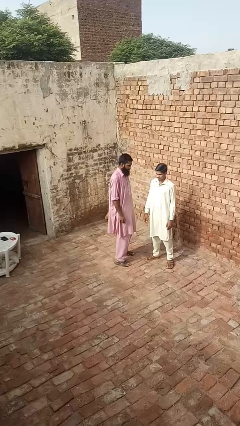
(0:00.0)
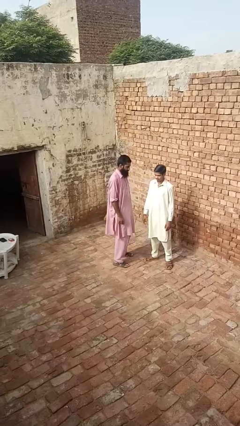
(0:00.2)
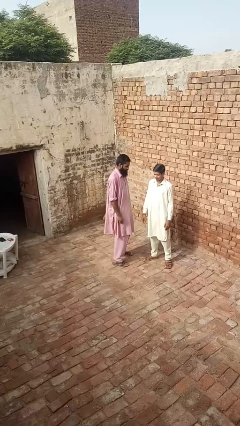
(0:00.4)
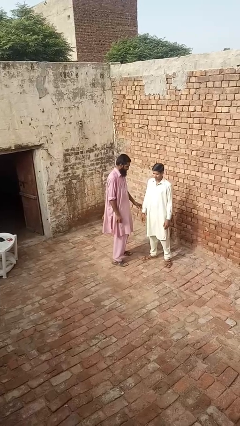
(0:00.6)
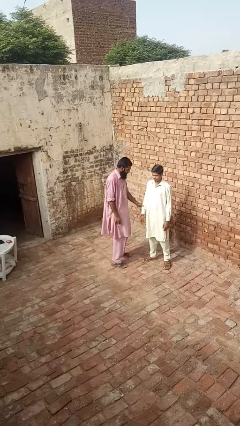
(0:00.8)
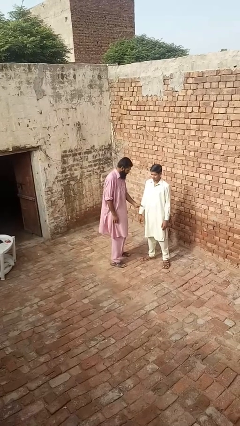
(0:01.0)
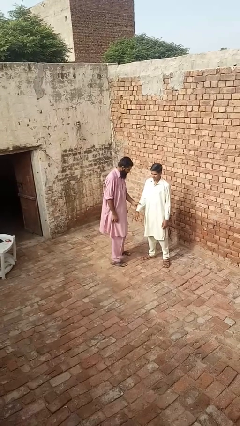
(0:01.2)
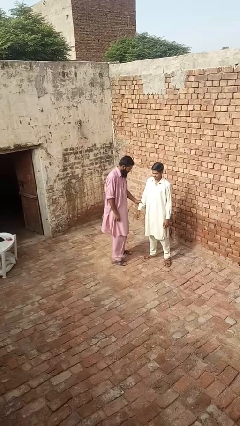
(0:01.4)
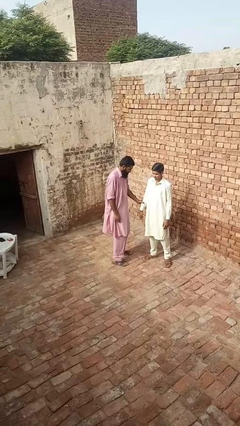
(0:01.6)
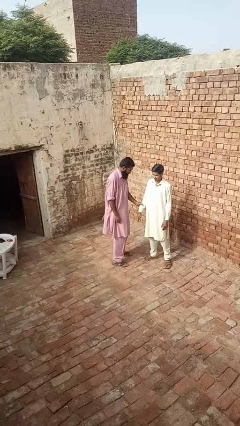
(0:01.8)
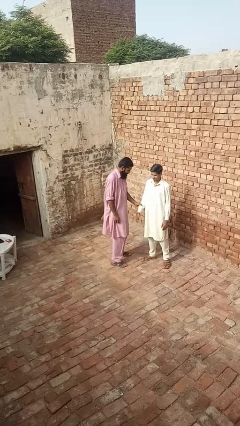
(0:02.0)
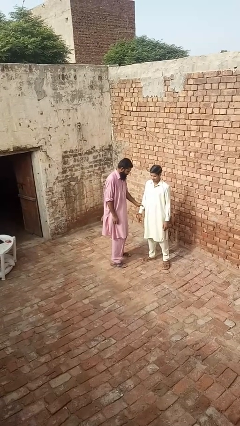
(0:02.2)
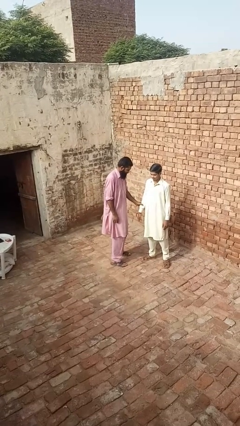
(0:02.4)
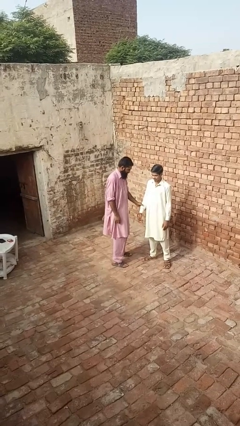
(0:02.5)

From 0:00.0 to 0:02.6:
person grabs person by forearm

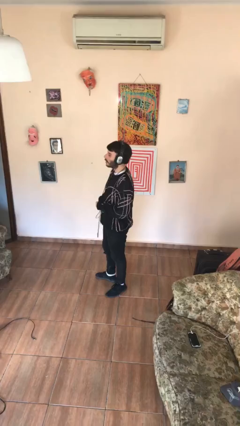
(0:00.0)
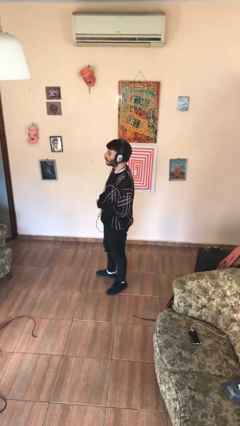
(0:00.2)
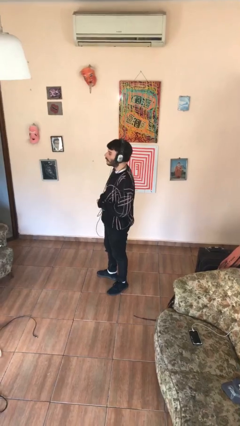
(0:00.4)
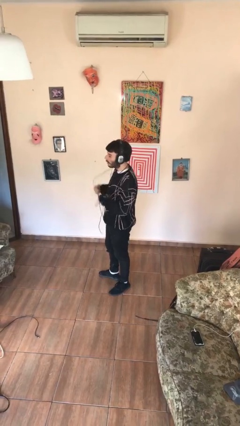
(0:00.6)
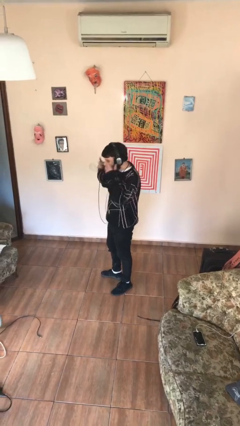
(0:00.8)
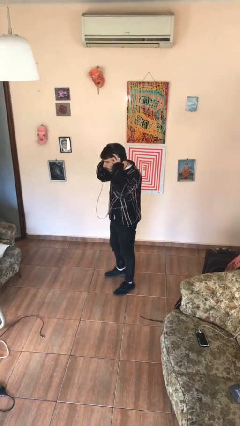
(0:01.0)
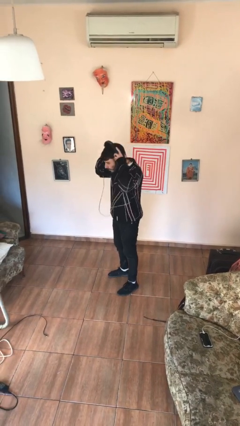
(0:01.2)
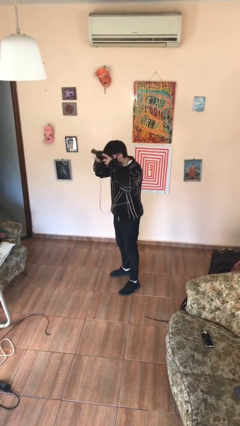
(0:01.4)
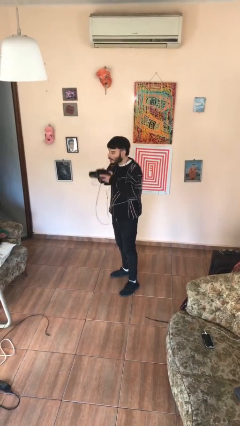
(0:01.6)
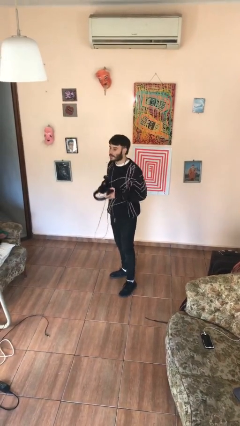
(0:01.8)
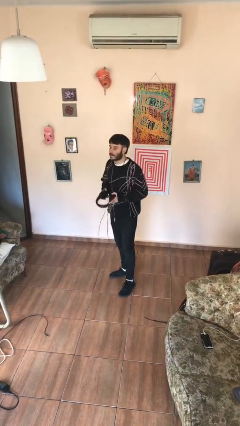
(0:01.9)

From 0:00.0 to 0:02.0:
person takes off headphones

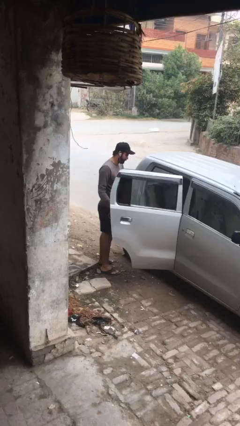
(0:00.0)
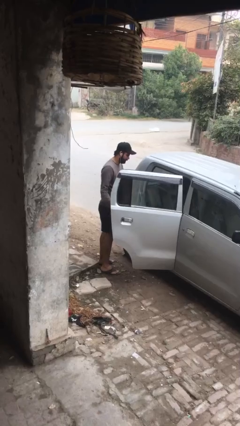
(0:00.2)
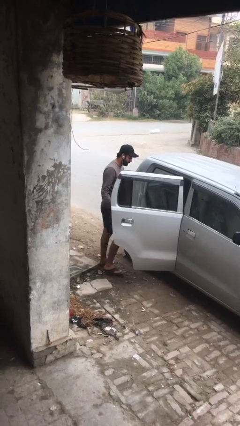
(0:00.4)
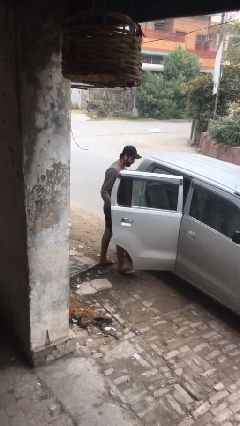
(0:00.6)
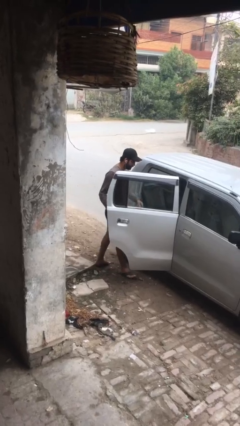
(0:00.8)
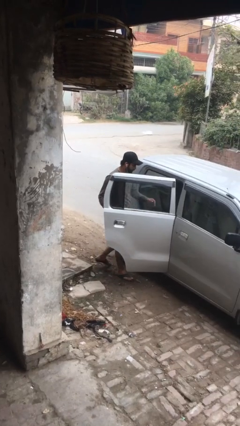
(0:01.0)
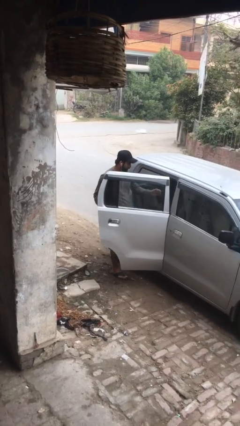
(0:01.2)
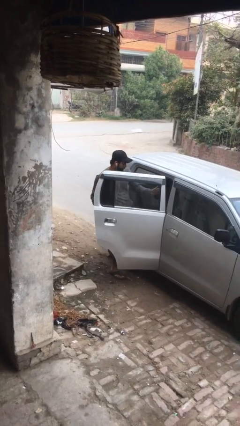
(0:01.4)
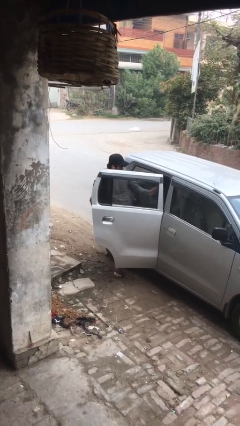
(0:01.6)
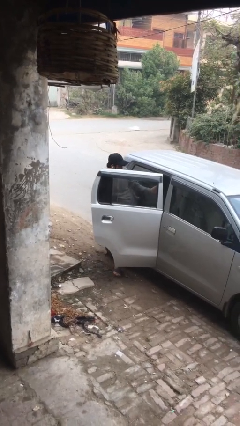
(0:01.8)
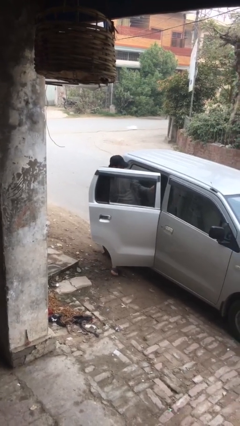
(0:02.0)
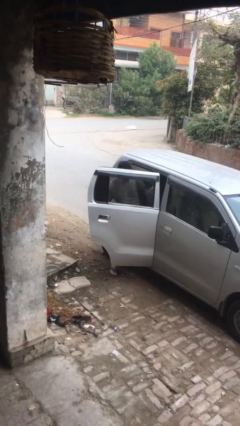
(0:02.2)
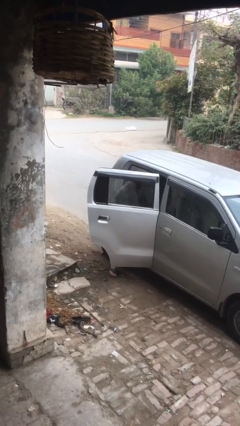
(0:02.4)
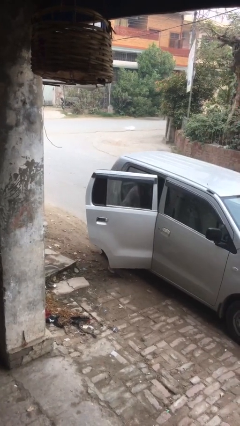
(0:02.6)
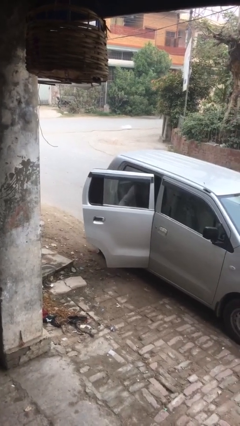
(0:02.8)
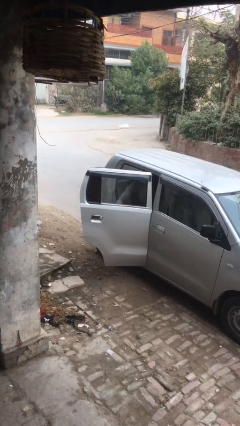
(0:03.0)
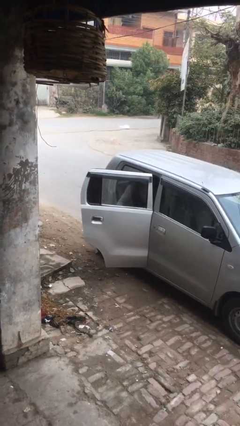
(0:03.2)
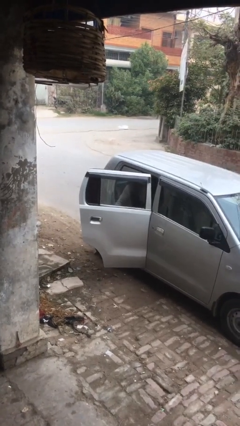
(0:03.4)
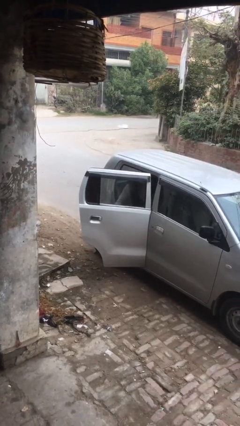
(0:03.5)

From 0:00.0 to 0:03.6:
person enters car

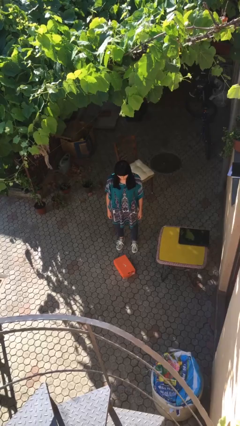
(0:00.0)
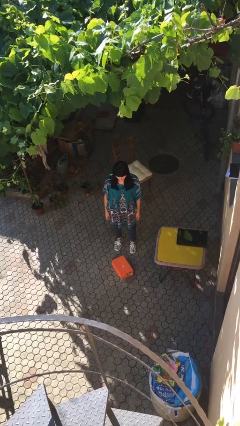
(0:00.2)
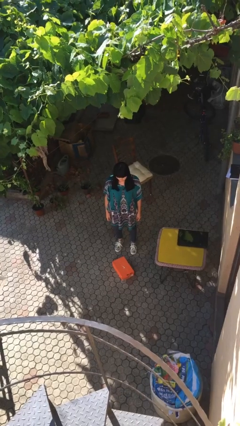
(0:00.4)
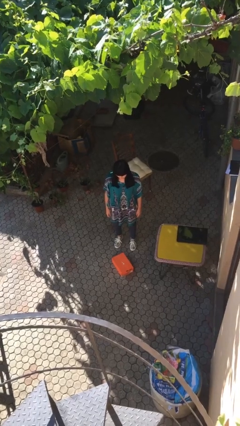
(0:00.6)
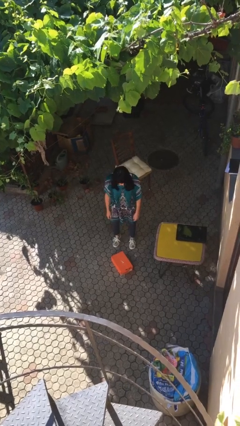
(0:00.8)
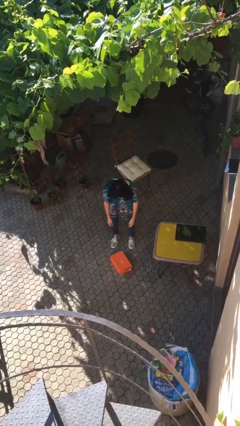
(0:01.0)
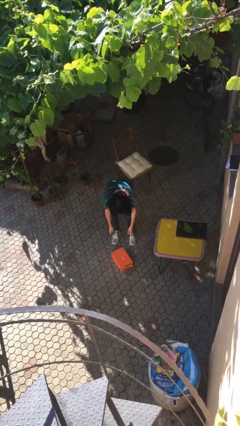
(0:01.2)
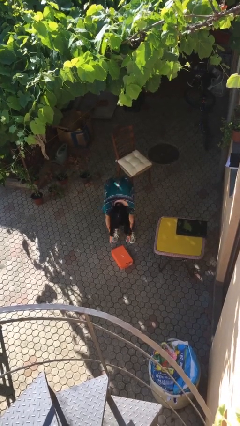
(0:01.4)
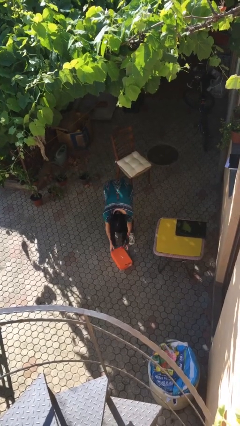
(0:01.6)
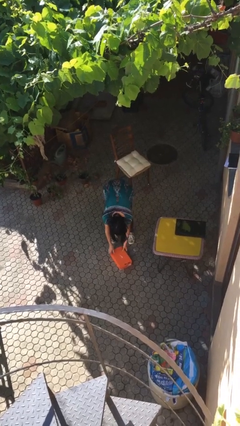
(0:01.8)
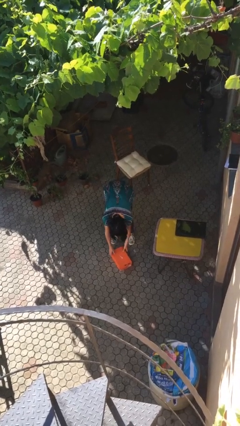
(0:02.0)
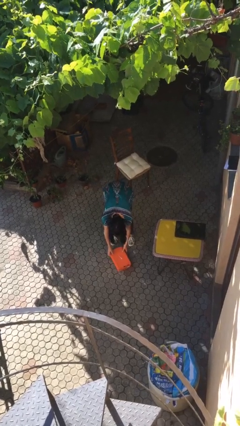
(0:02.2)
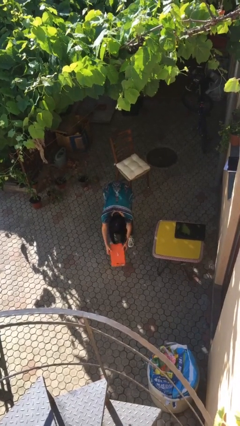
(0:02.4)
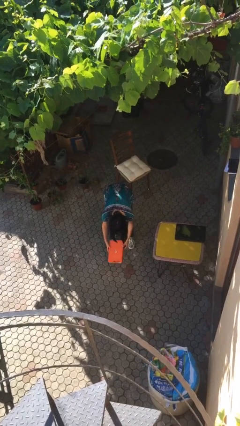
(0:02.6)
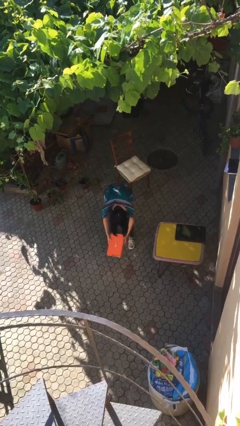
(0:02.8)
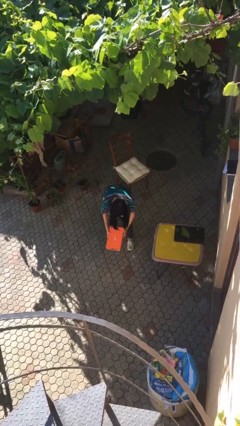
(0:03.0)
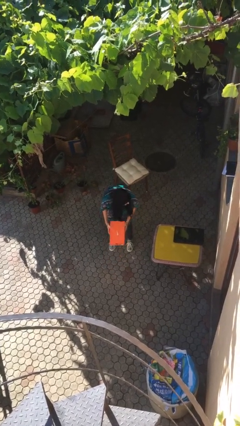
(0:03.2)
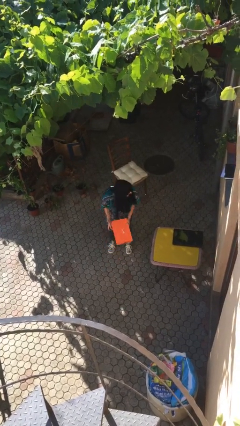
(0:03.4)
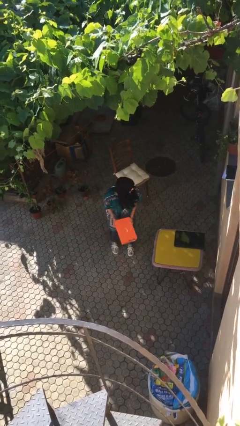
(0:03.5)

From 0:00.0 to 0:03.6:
person picks up object from floor

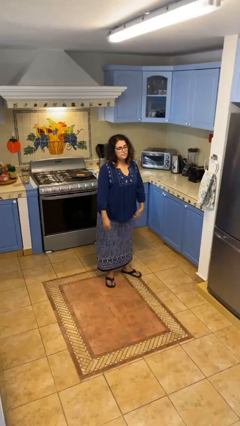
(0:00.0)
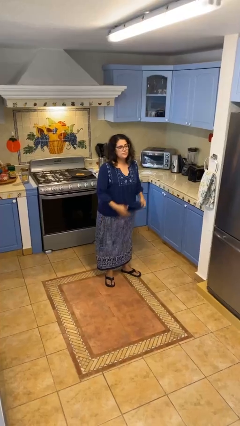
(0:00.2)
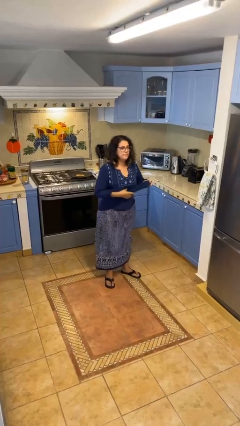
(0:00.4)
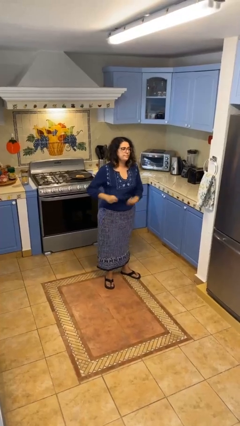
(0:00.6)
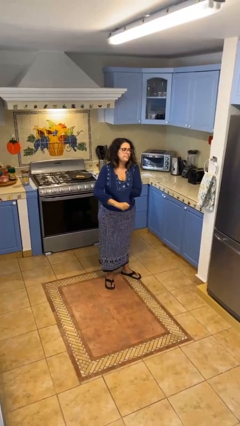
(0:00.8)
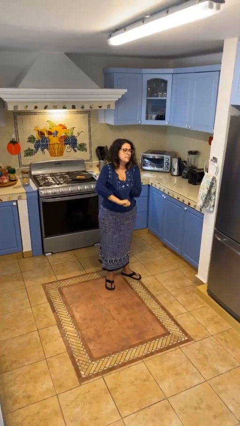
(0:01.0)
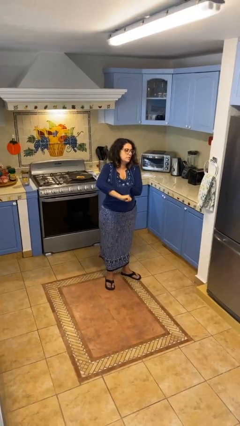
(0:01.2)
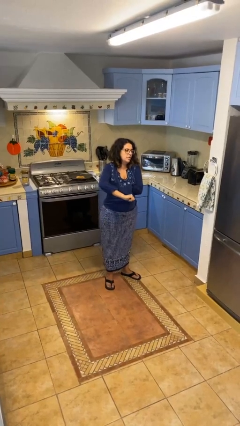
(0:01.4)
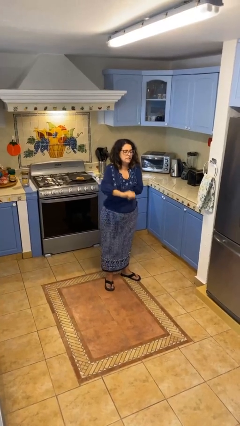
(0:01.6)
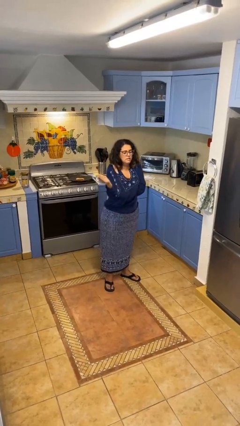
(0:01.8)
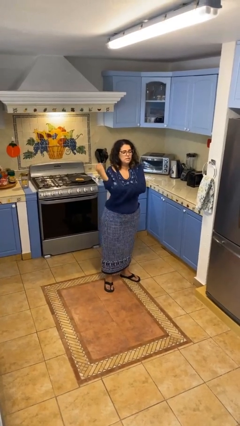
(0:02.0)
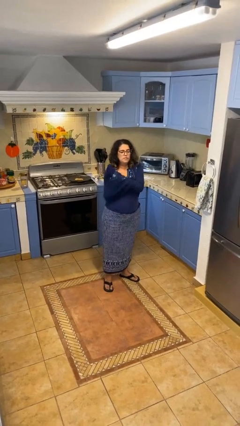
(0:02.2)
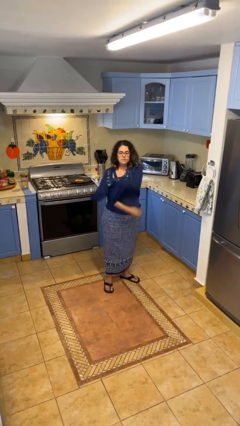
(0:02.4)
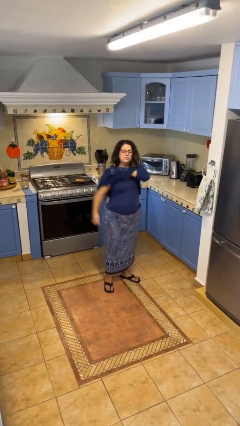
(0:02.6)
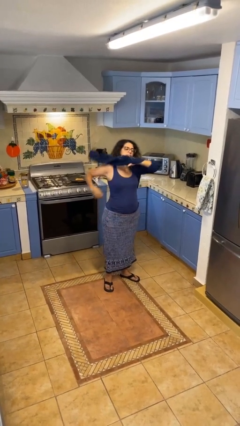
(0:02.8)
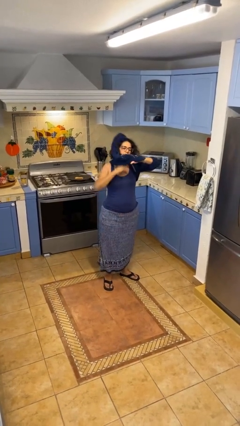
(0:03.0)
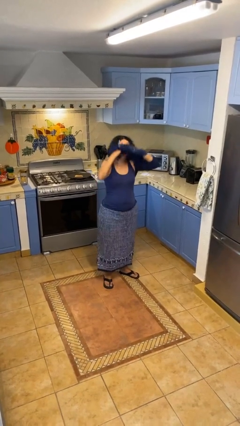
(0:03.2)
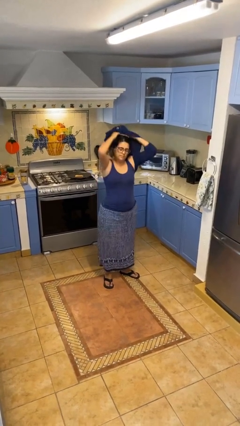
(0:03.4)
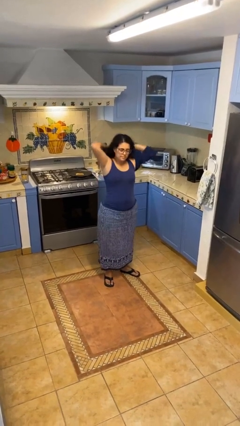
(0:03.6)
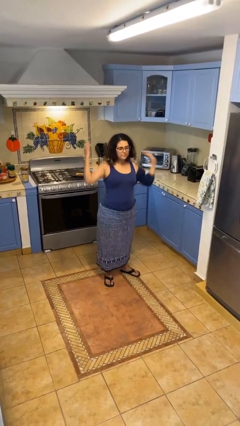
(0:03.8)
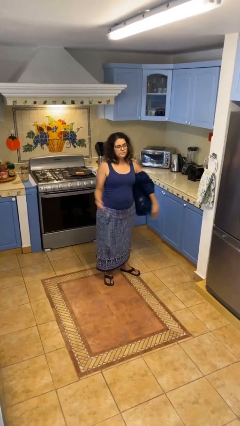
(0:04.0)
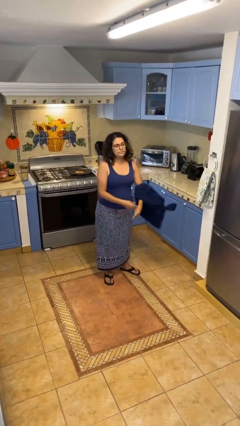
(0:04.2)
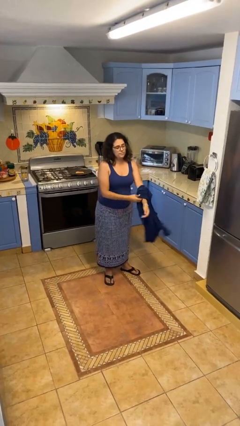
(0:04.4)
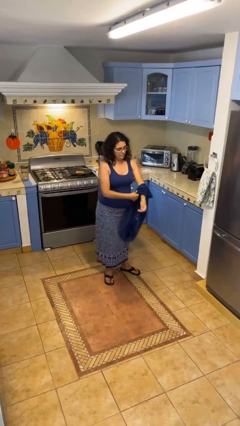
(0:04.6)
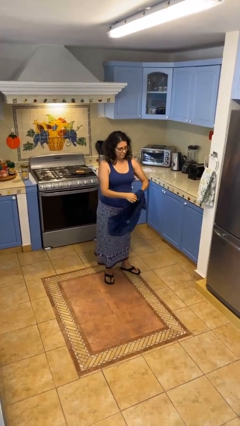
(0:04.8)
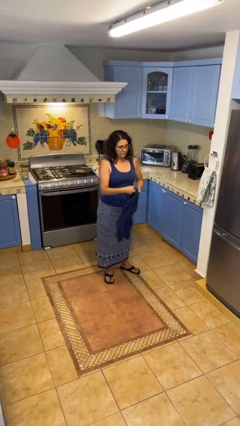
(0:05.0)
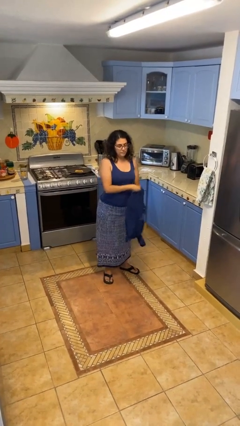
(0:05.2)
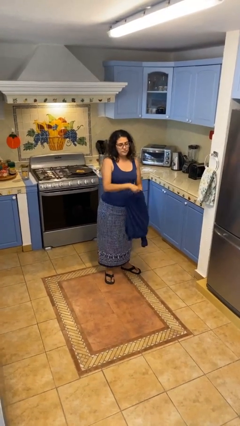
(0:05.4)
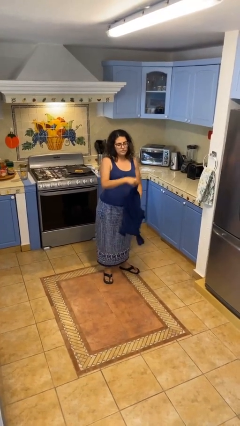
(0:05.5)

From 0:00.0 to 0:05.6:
person takes off shirt

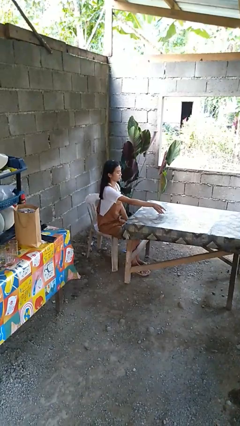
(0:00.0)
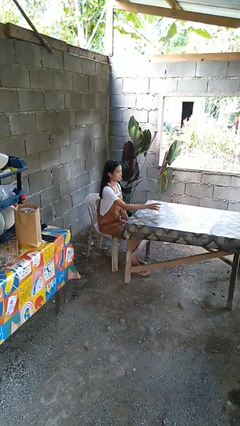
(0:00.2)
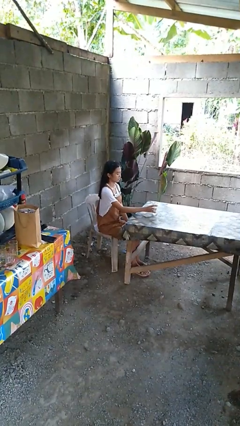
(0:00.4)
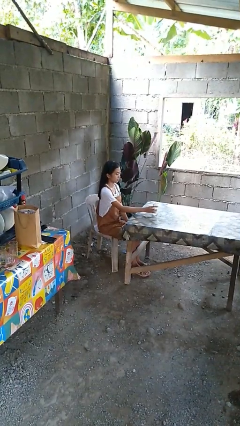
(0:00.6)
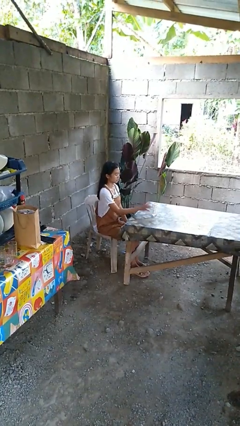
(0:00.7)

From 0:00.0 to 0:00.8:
person sets upright glass
